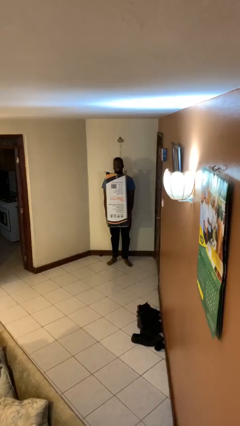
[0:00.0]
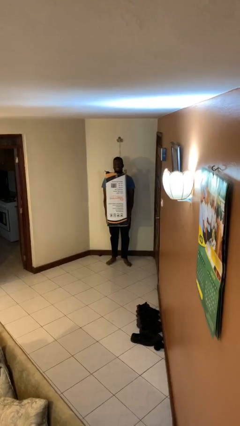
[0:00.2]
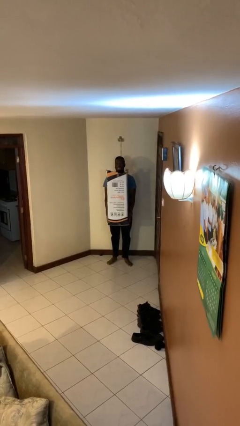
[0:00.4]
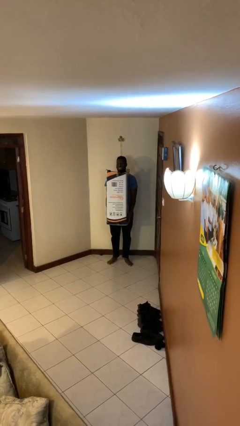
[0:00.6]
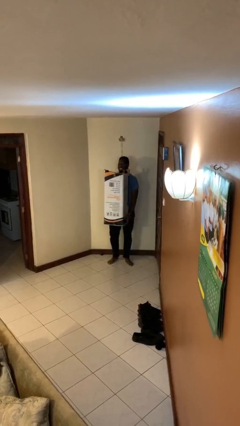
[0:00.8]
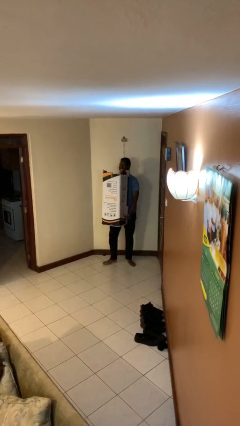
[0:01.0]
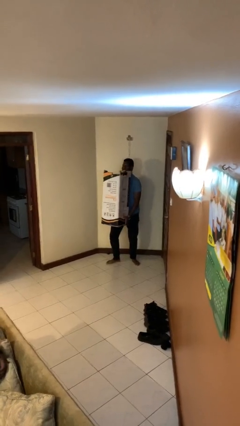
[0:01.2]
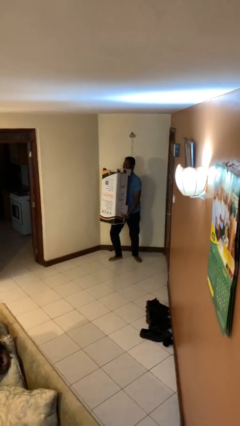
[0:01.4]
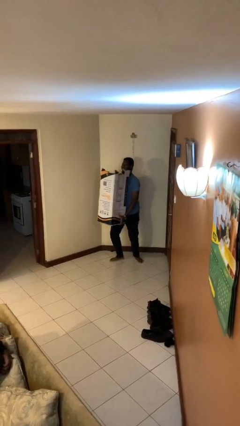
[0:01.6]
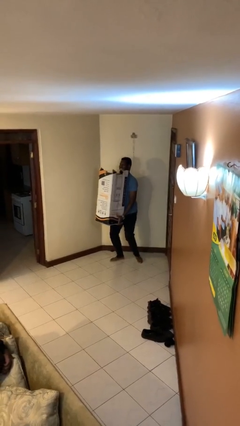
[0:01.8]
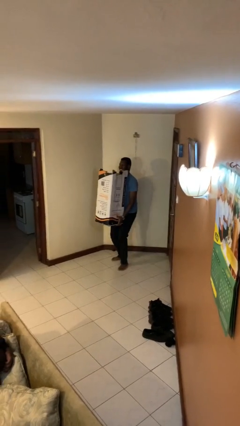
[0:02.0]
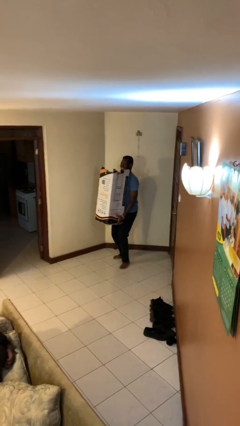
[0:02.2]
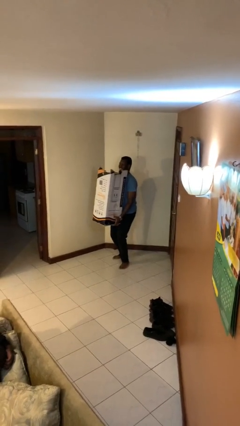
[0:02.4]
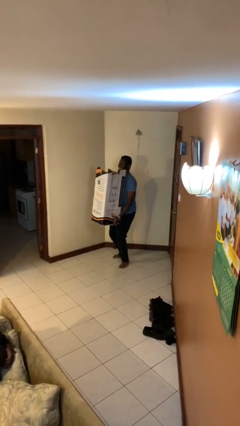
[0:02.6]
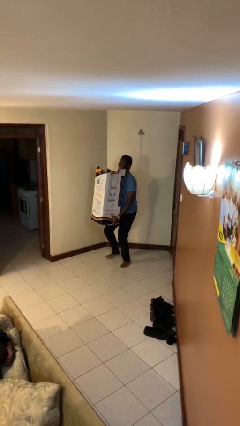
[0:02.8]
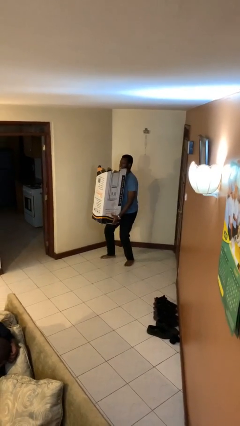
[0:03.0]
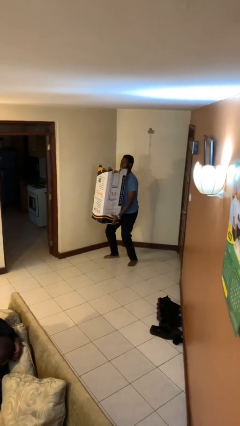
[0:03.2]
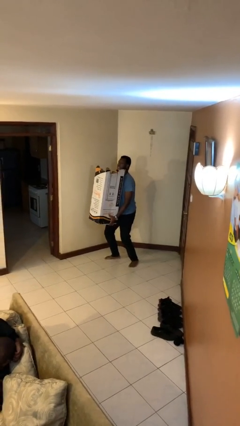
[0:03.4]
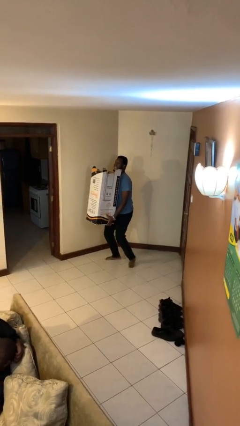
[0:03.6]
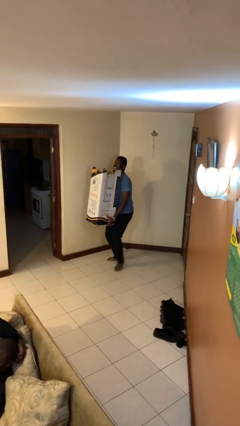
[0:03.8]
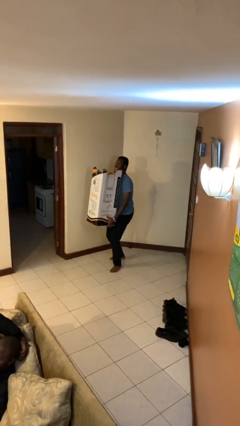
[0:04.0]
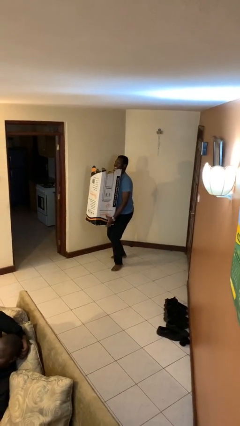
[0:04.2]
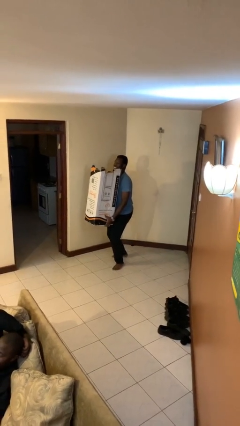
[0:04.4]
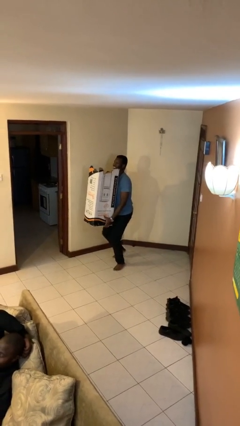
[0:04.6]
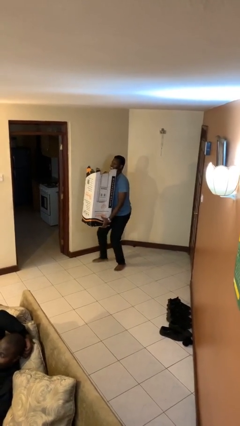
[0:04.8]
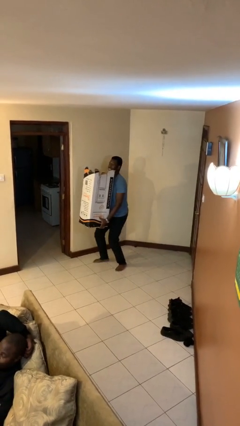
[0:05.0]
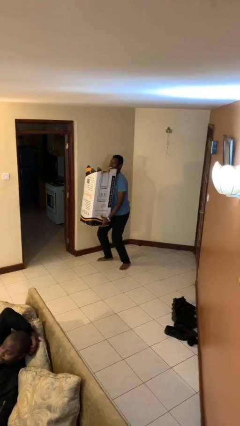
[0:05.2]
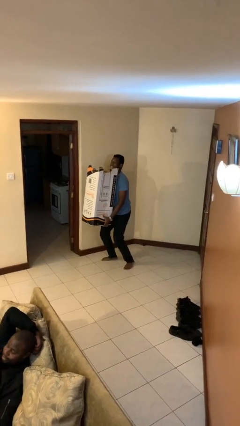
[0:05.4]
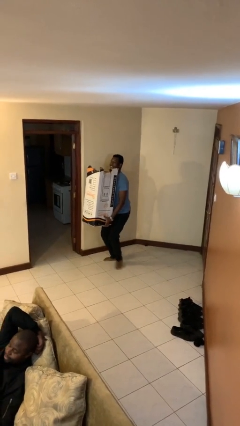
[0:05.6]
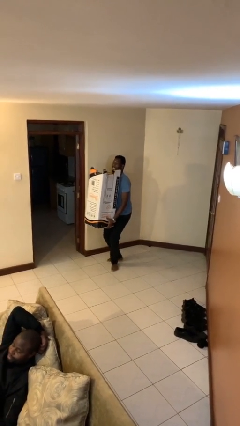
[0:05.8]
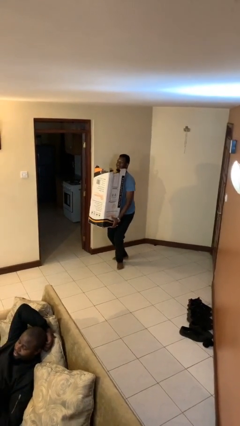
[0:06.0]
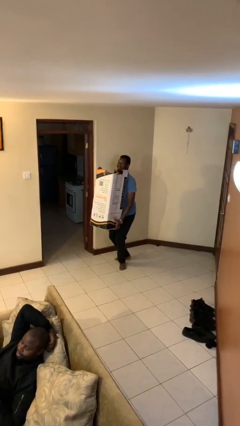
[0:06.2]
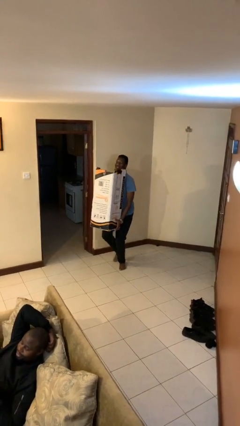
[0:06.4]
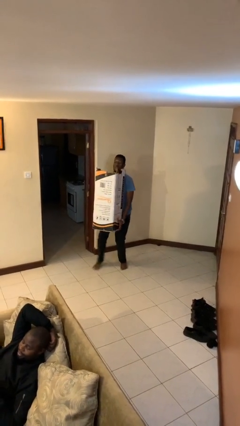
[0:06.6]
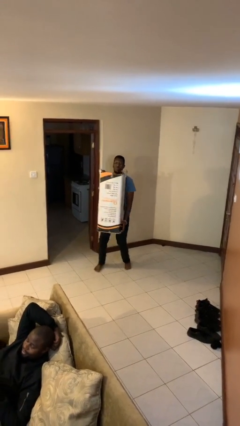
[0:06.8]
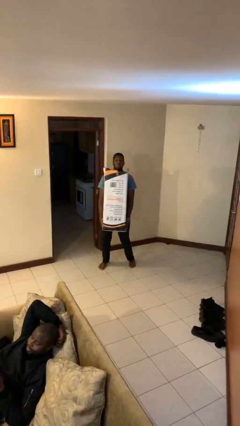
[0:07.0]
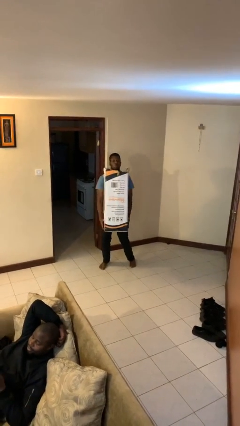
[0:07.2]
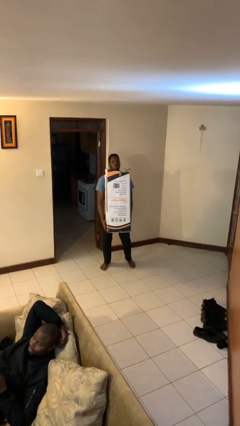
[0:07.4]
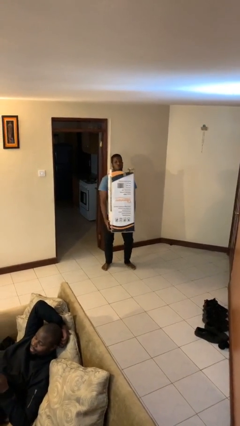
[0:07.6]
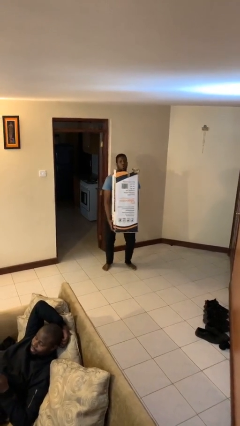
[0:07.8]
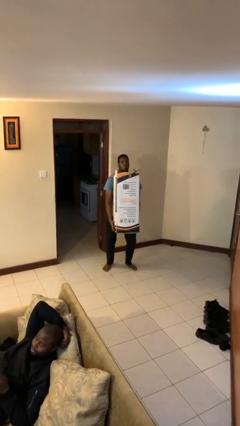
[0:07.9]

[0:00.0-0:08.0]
person carries heavy object

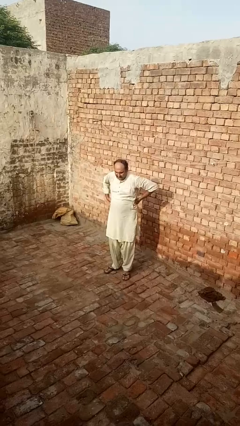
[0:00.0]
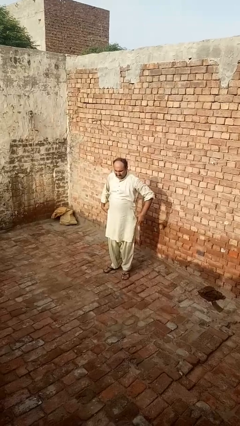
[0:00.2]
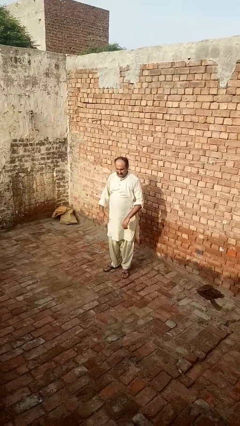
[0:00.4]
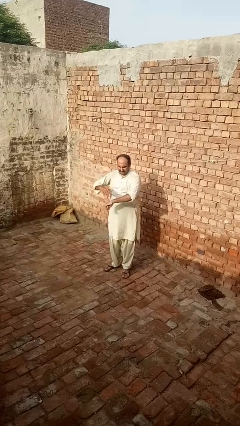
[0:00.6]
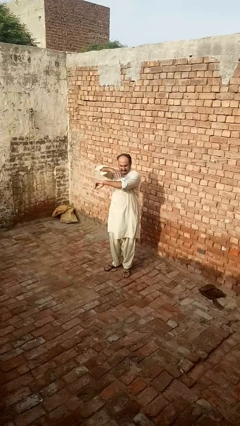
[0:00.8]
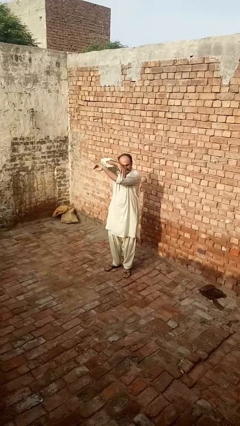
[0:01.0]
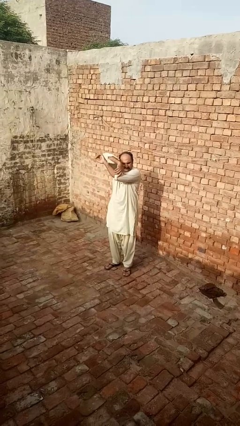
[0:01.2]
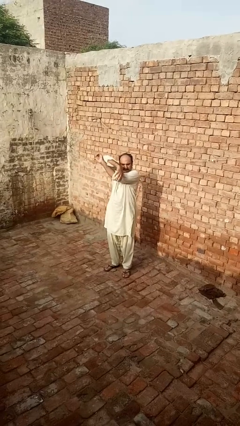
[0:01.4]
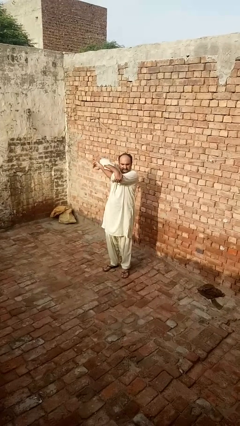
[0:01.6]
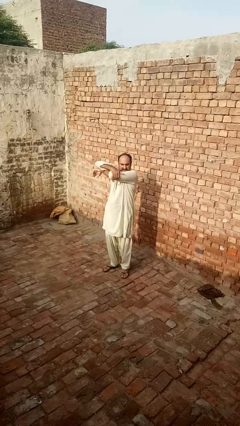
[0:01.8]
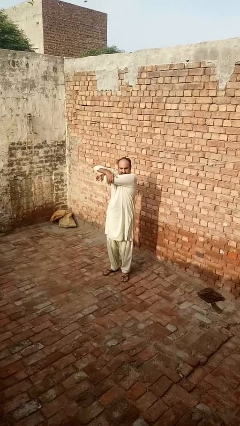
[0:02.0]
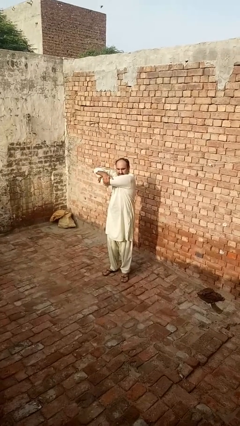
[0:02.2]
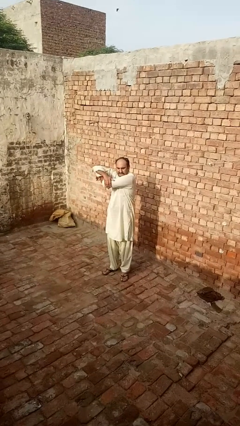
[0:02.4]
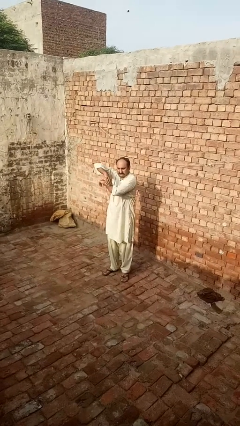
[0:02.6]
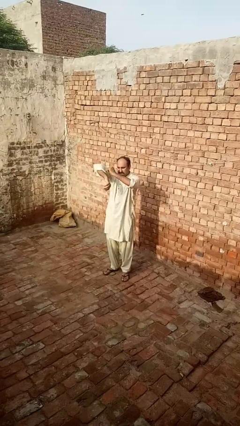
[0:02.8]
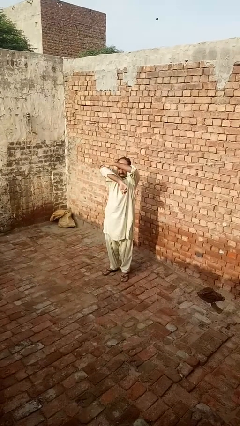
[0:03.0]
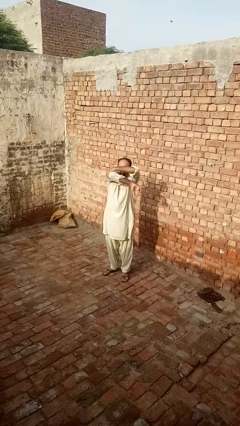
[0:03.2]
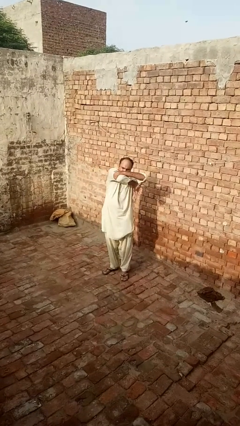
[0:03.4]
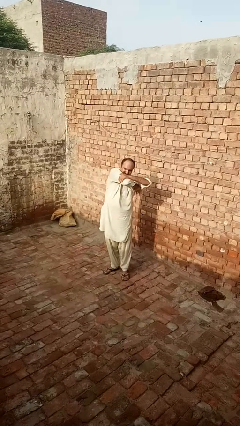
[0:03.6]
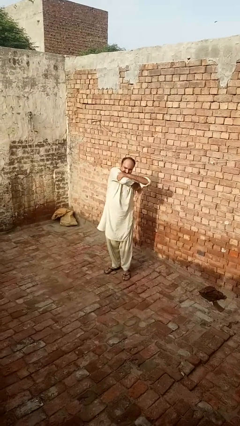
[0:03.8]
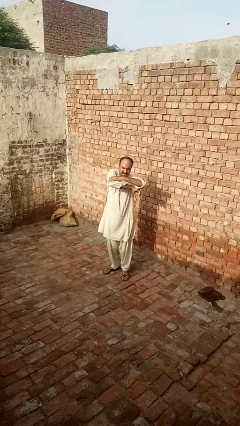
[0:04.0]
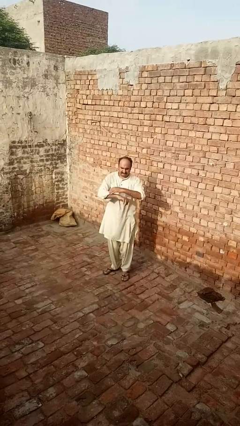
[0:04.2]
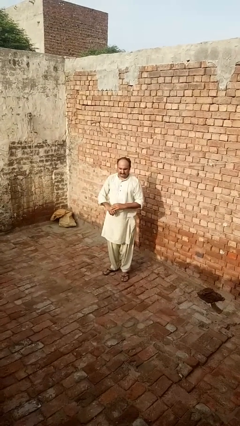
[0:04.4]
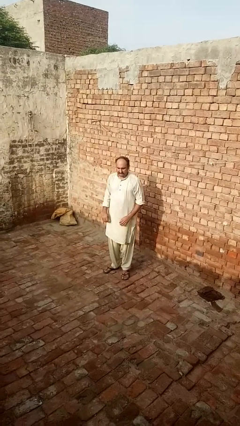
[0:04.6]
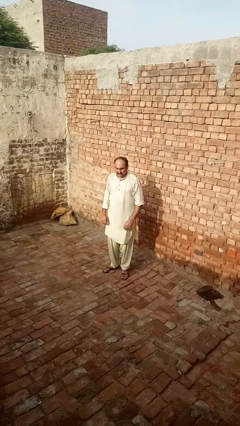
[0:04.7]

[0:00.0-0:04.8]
person stretches arms to side

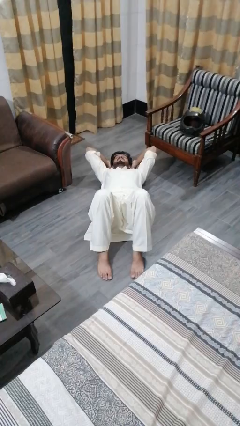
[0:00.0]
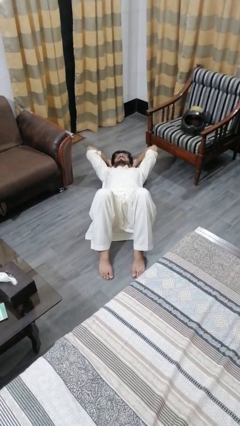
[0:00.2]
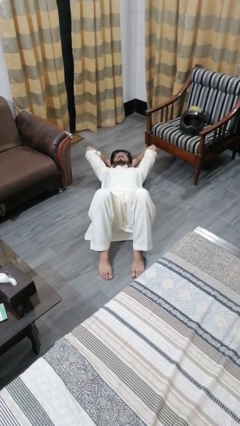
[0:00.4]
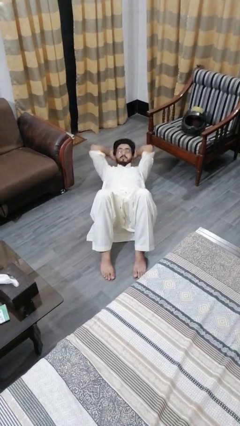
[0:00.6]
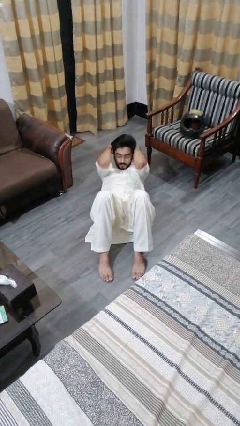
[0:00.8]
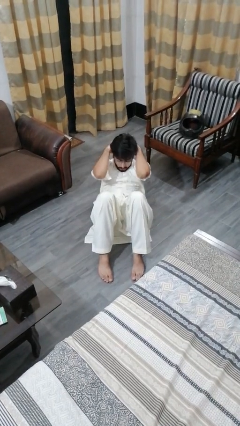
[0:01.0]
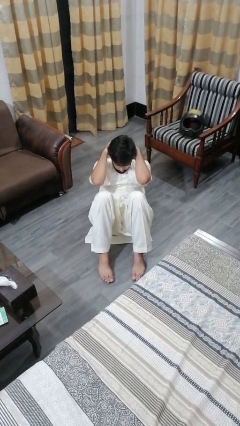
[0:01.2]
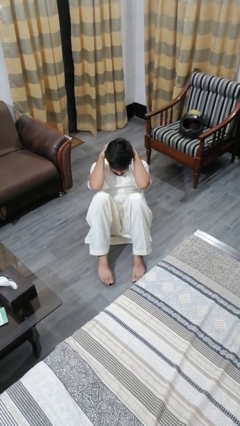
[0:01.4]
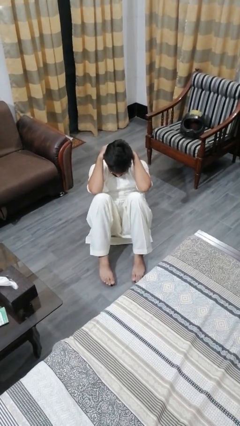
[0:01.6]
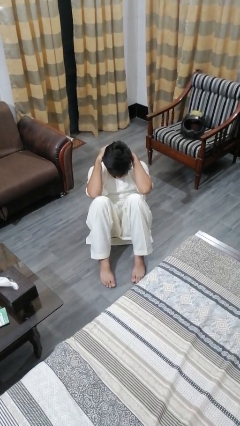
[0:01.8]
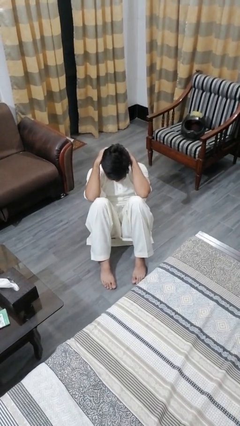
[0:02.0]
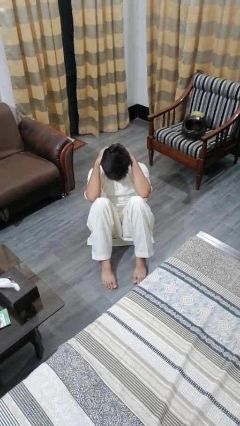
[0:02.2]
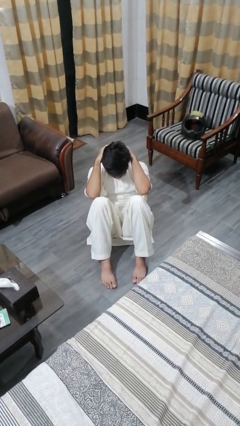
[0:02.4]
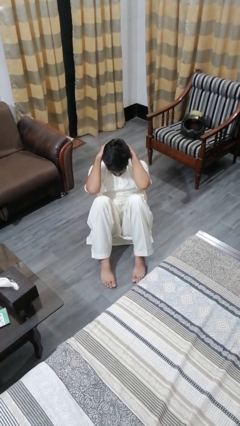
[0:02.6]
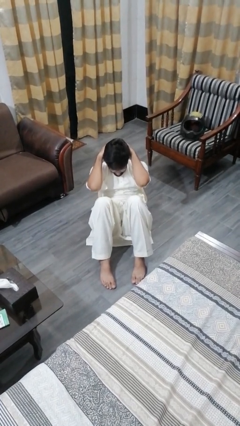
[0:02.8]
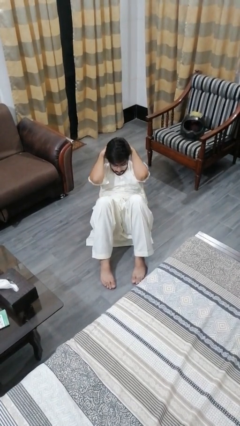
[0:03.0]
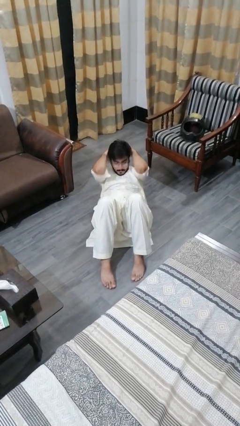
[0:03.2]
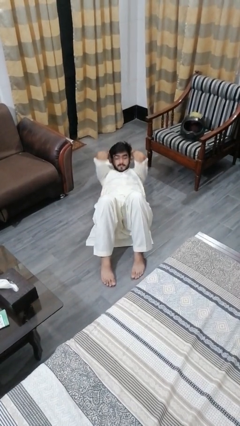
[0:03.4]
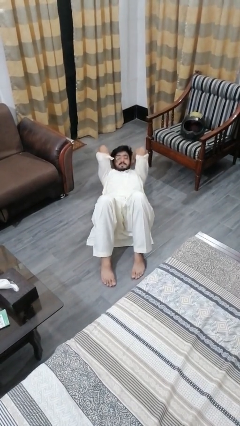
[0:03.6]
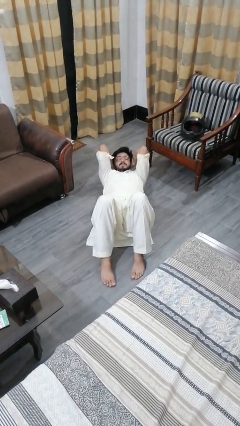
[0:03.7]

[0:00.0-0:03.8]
person exercises with situp

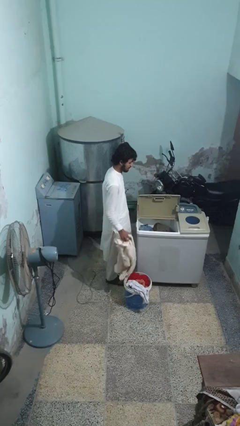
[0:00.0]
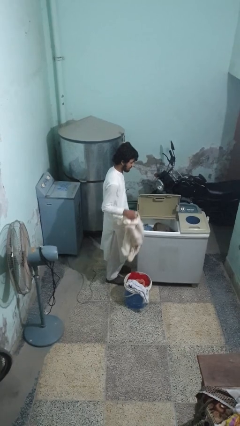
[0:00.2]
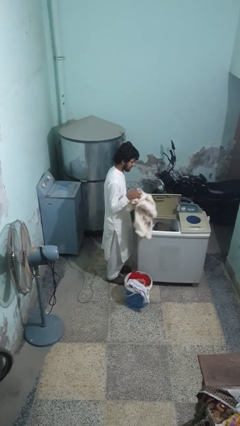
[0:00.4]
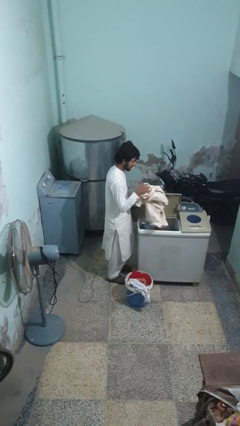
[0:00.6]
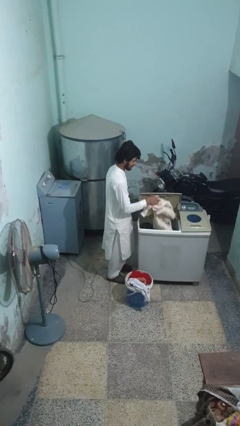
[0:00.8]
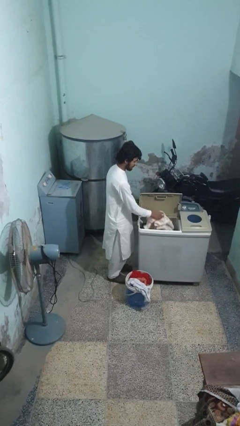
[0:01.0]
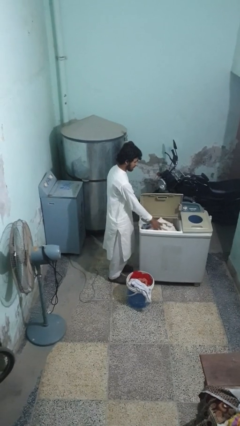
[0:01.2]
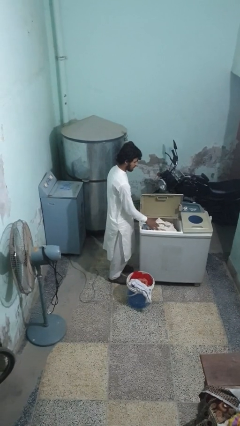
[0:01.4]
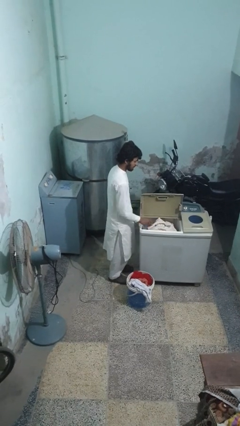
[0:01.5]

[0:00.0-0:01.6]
person loads clotheswasher
